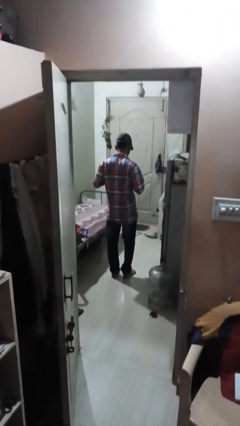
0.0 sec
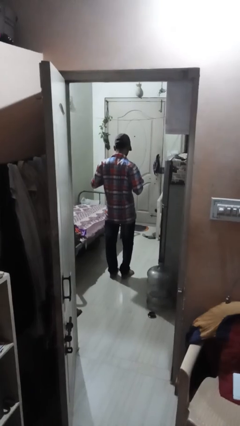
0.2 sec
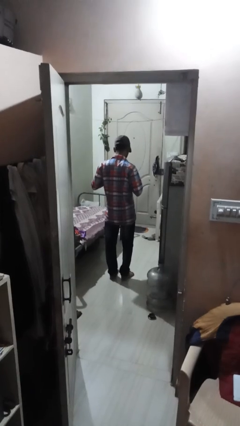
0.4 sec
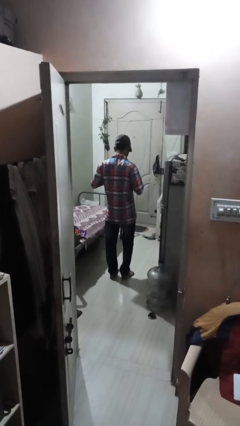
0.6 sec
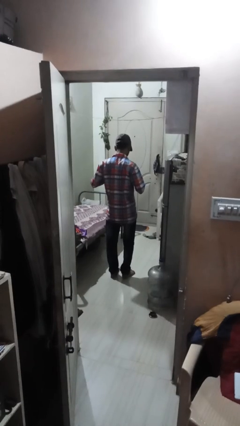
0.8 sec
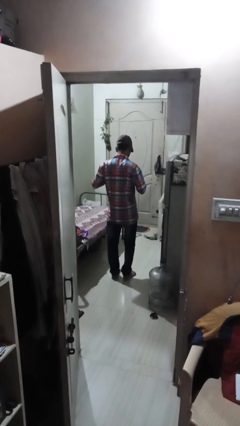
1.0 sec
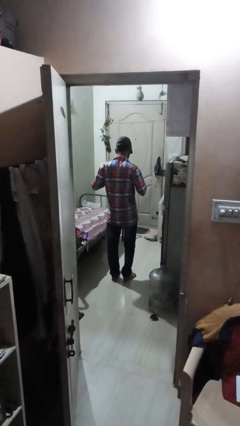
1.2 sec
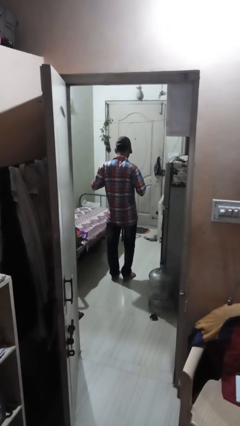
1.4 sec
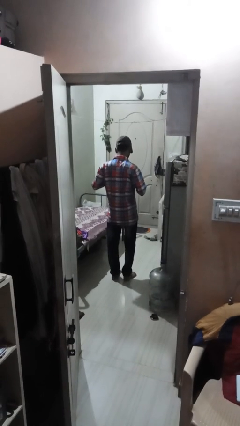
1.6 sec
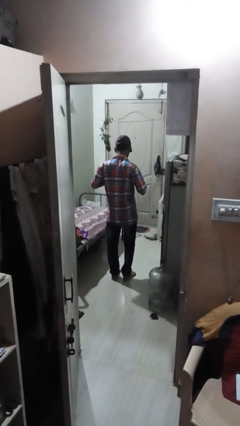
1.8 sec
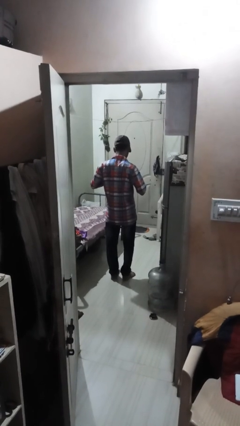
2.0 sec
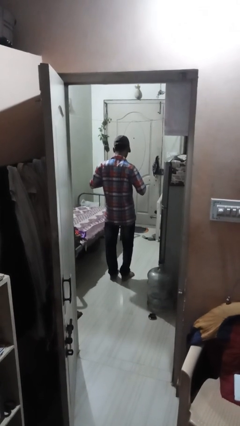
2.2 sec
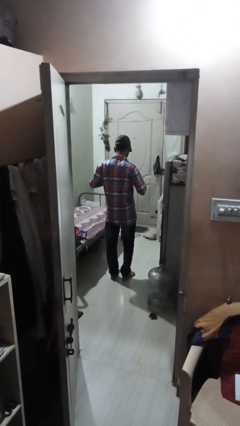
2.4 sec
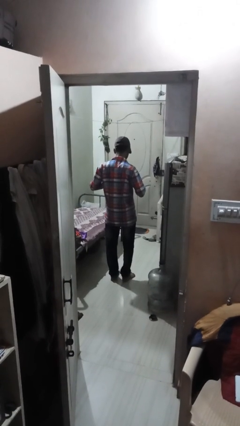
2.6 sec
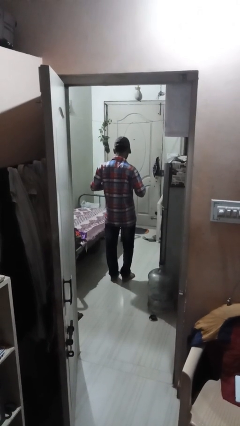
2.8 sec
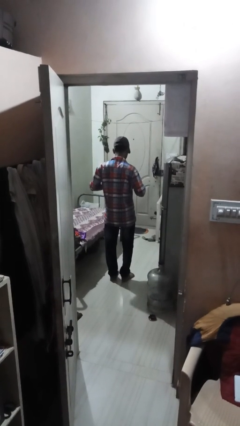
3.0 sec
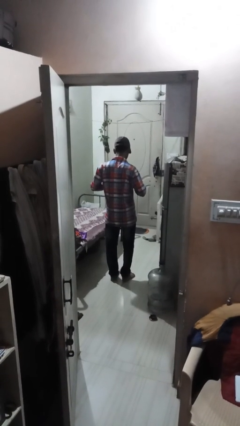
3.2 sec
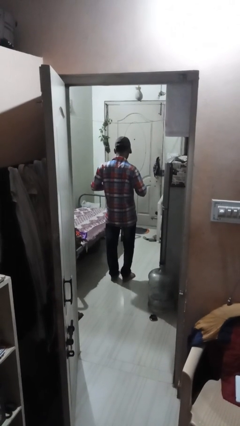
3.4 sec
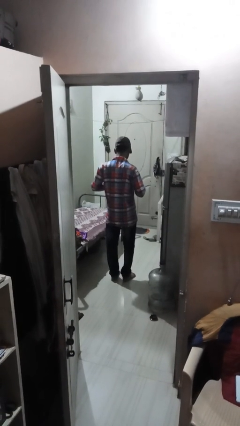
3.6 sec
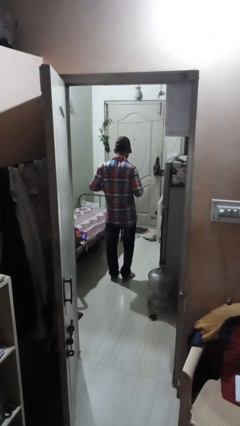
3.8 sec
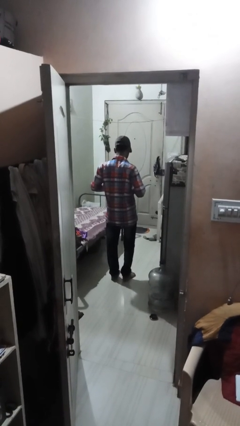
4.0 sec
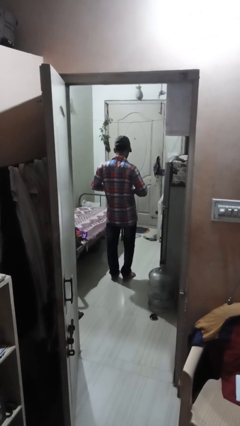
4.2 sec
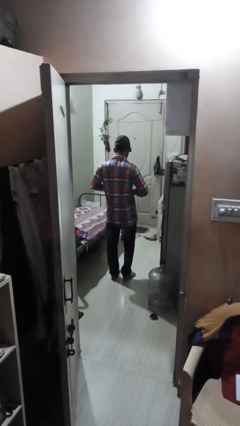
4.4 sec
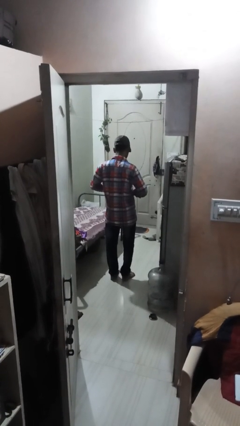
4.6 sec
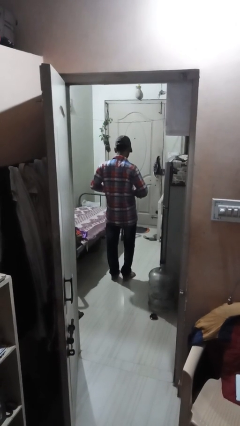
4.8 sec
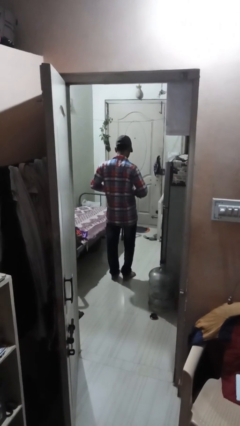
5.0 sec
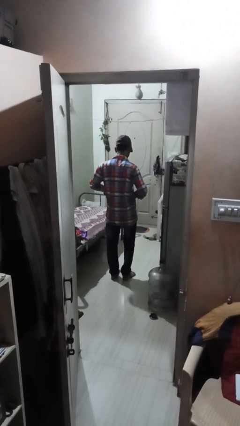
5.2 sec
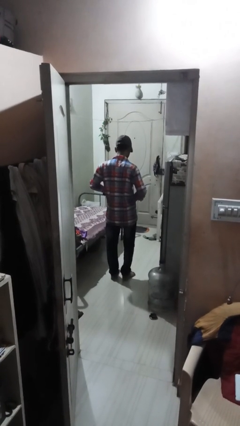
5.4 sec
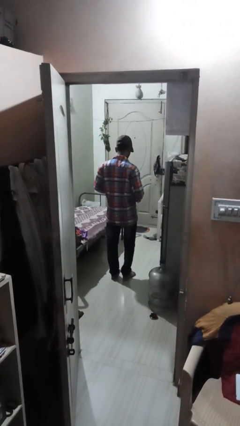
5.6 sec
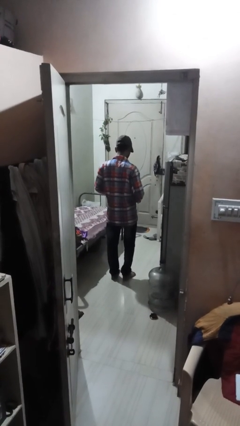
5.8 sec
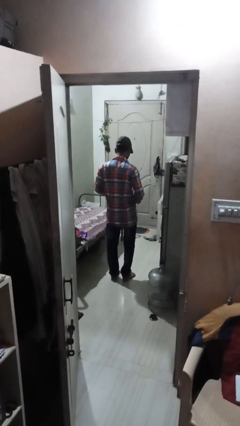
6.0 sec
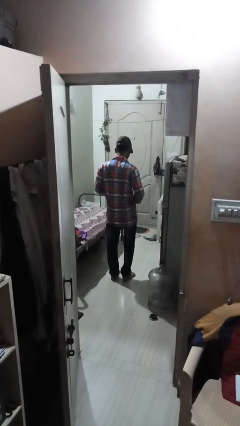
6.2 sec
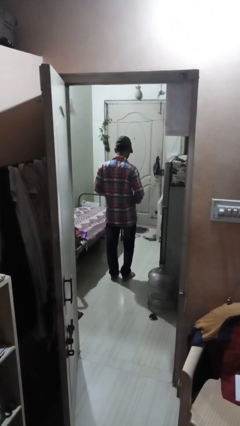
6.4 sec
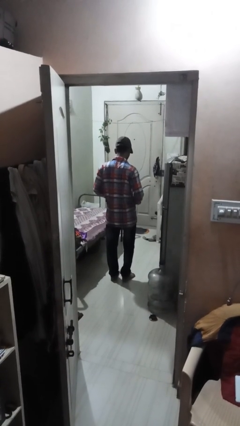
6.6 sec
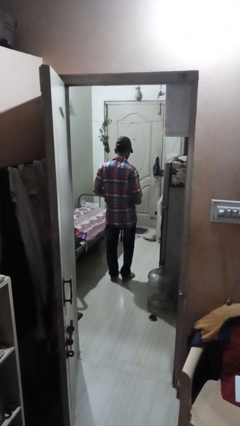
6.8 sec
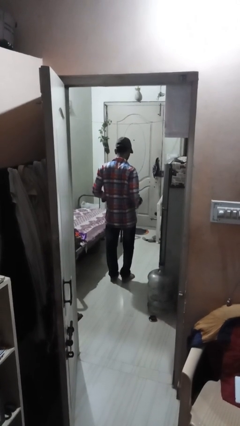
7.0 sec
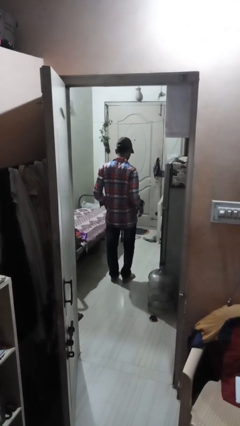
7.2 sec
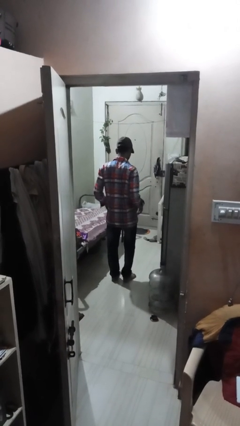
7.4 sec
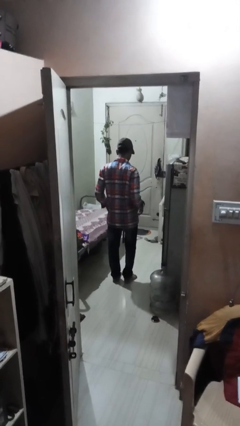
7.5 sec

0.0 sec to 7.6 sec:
person unbuttons shirt

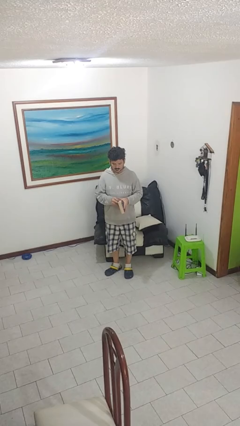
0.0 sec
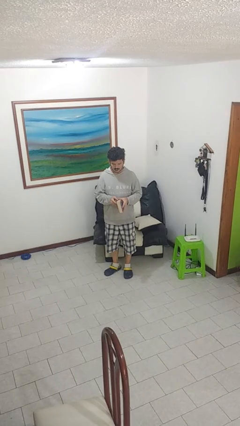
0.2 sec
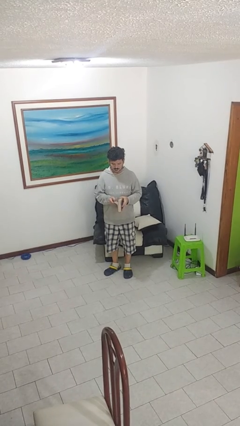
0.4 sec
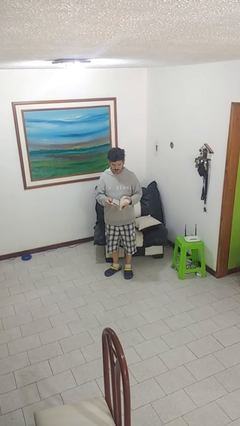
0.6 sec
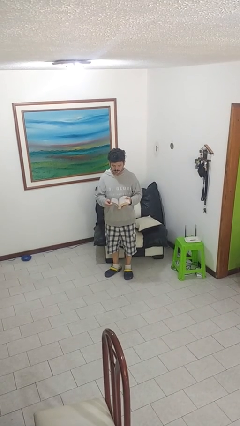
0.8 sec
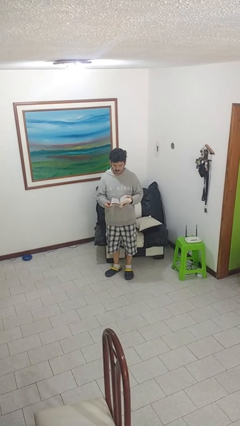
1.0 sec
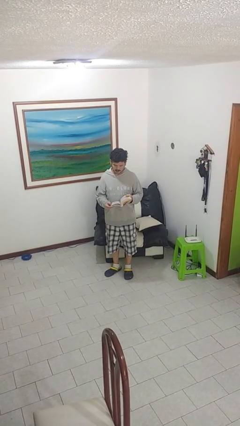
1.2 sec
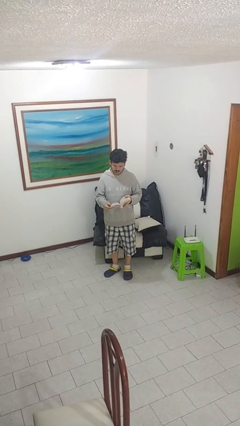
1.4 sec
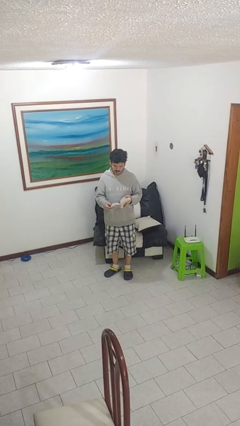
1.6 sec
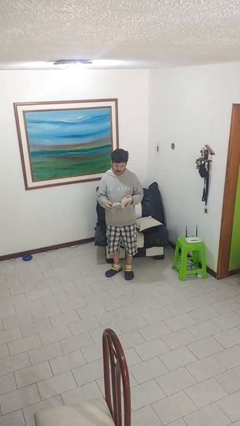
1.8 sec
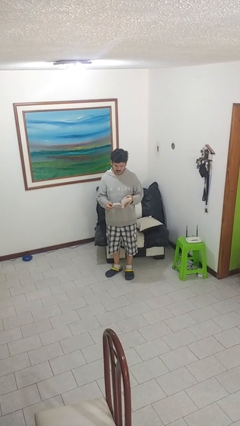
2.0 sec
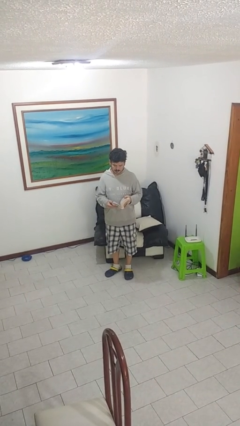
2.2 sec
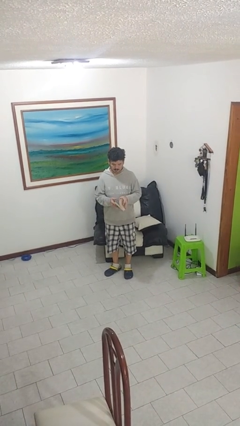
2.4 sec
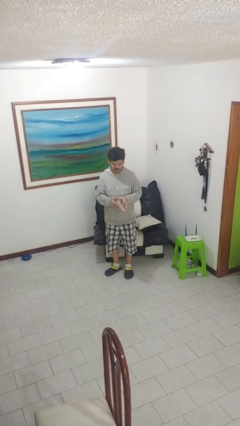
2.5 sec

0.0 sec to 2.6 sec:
person reads book

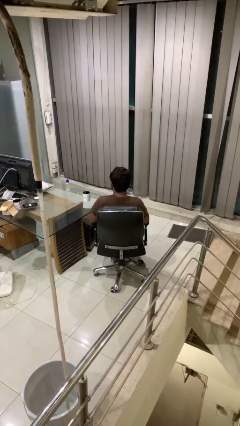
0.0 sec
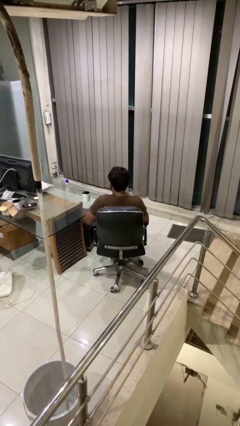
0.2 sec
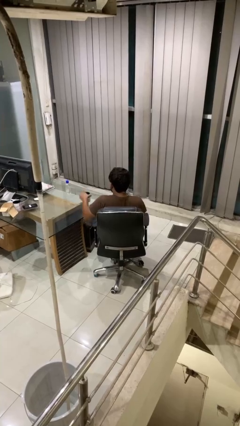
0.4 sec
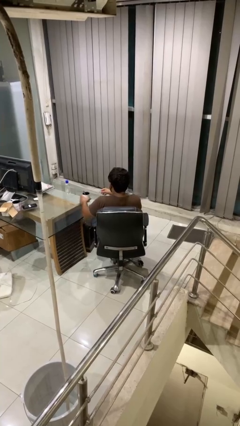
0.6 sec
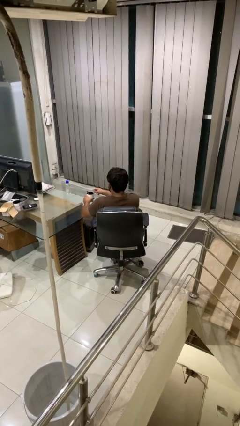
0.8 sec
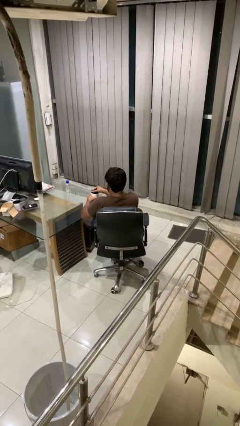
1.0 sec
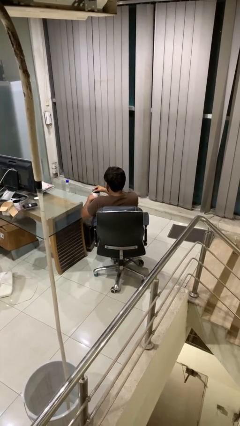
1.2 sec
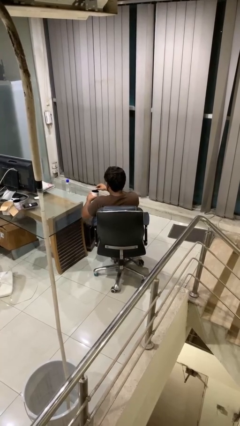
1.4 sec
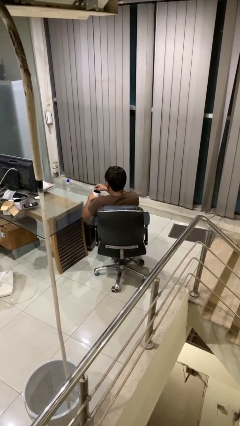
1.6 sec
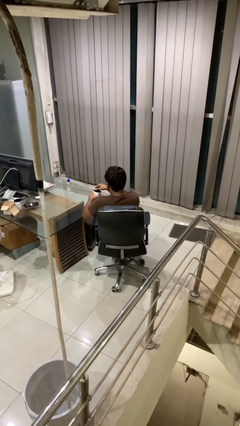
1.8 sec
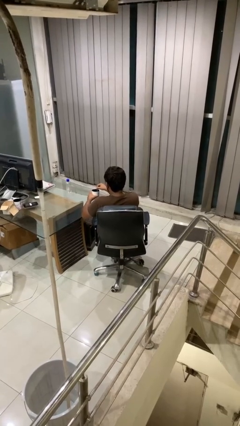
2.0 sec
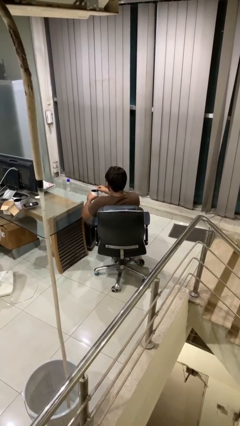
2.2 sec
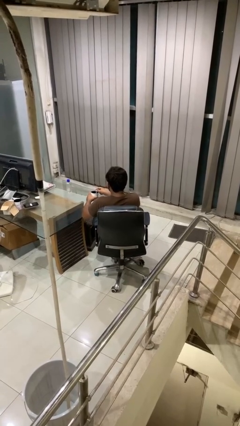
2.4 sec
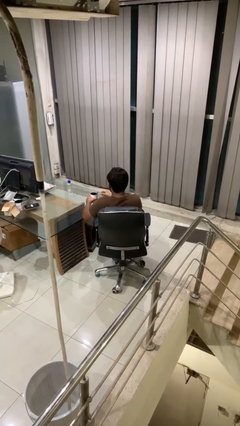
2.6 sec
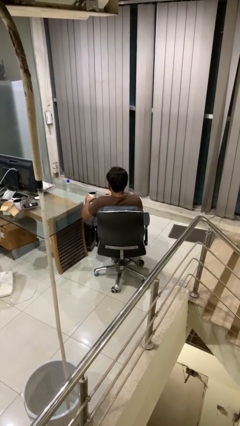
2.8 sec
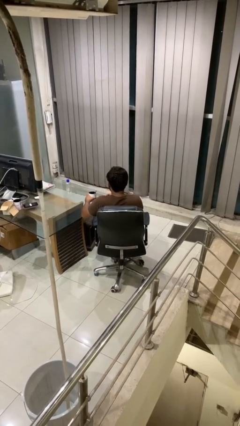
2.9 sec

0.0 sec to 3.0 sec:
person stirs mug

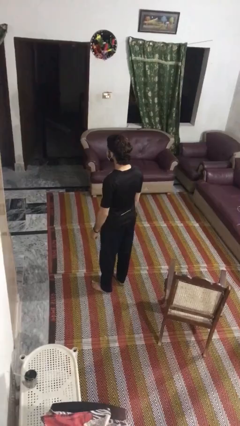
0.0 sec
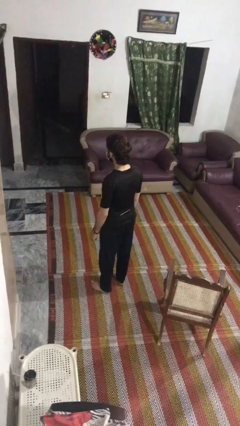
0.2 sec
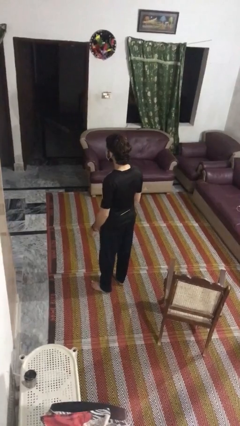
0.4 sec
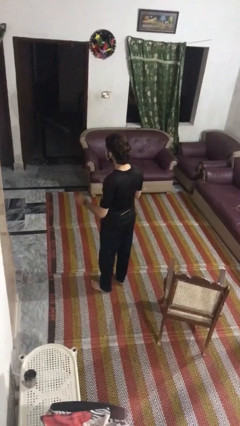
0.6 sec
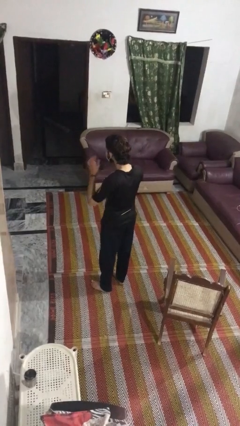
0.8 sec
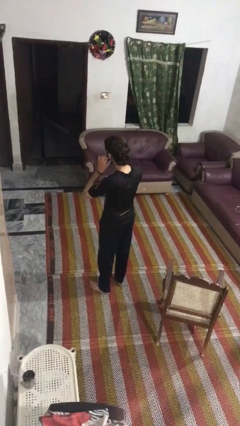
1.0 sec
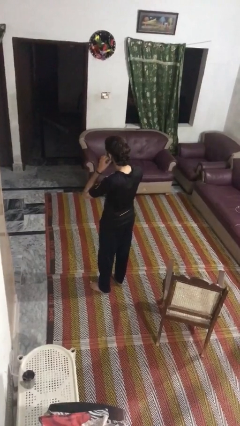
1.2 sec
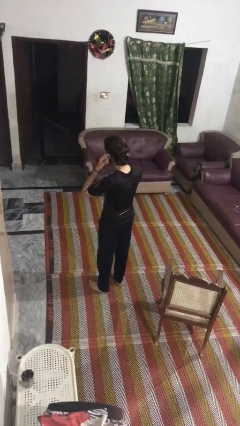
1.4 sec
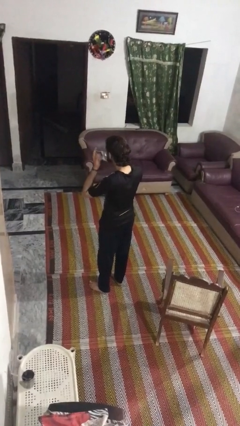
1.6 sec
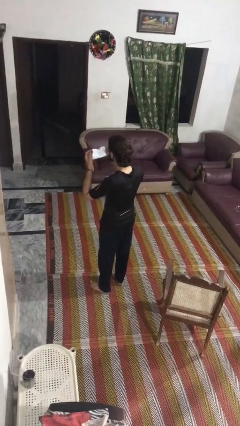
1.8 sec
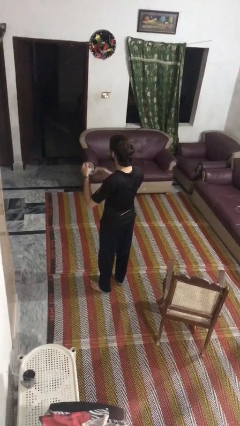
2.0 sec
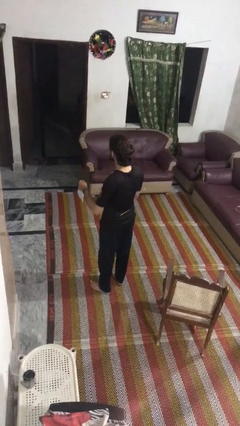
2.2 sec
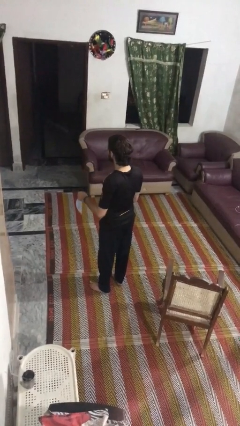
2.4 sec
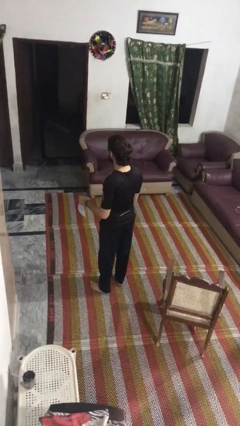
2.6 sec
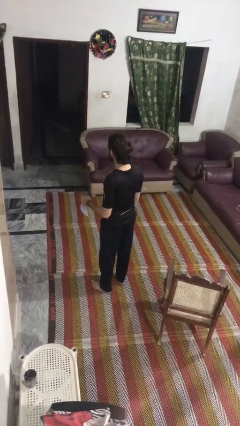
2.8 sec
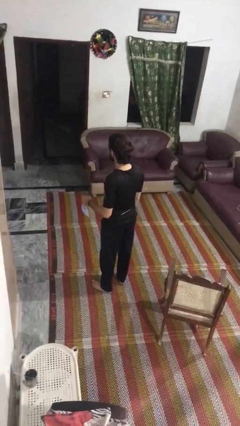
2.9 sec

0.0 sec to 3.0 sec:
person takes off facemask

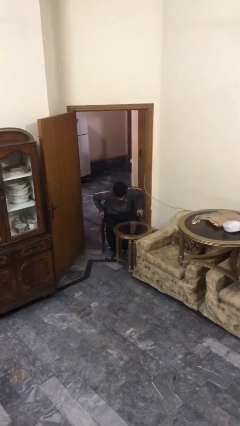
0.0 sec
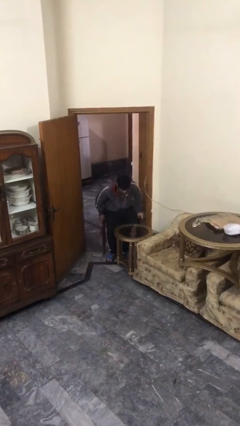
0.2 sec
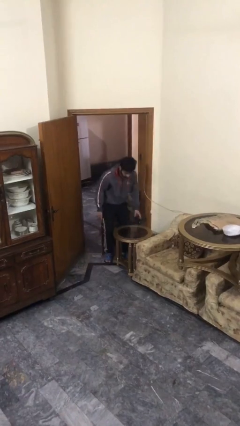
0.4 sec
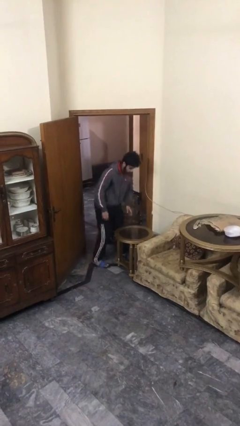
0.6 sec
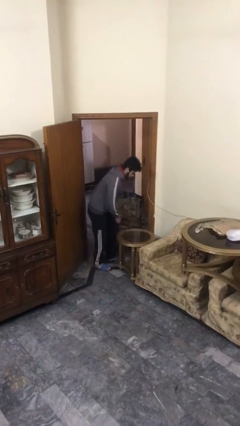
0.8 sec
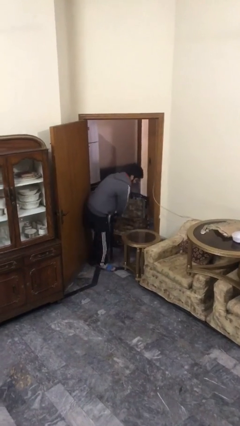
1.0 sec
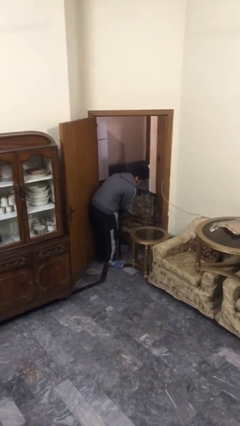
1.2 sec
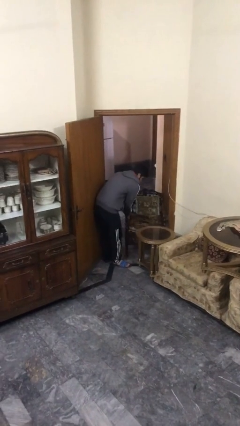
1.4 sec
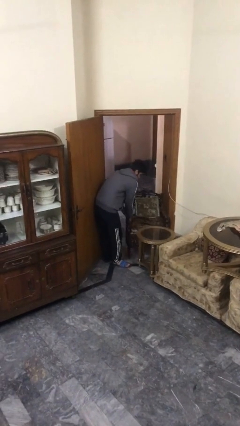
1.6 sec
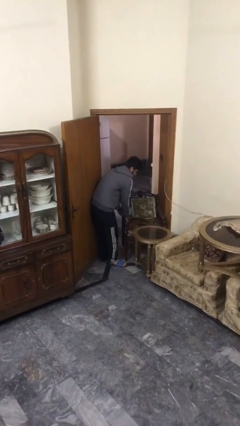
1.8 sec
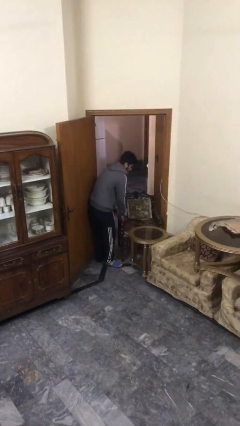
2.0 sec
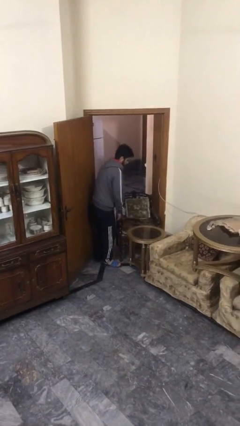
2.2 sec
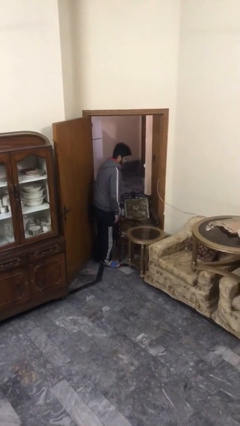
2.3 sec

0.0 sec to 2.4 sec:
person stands up
